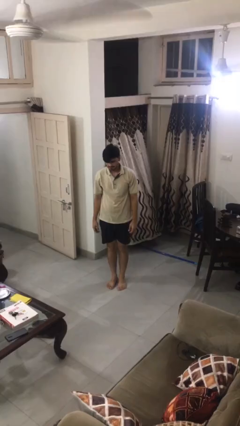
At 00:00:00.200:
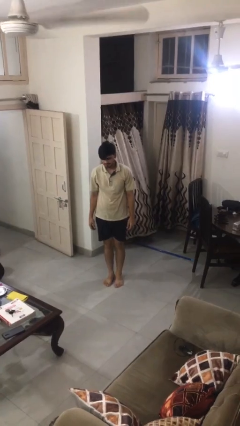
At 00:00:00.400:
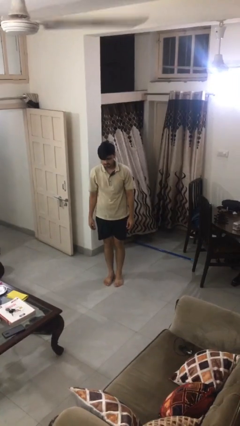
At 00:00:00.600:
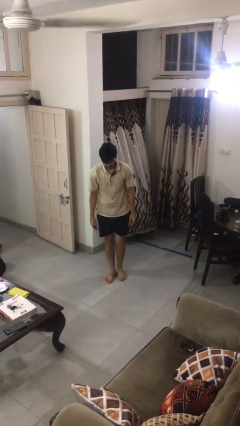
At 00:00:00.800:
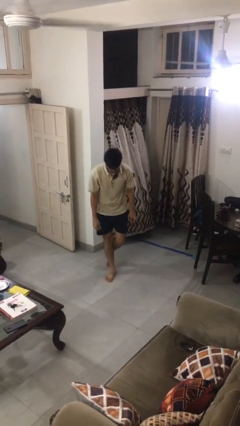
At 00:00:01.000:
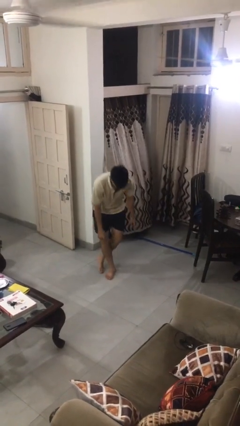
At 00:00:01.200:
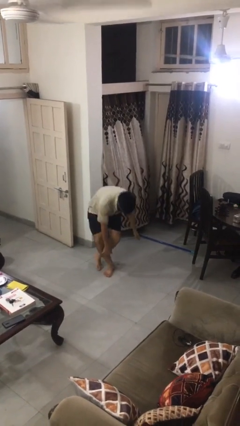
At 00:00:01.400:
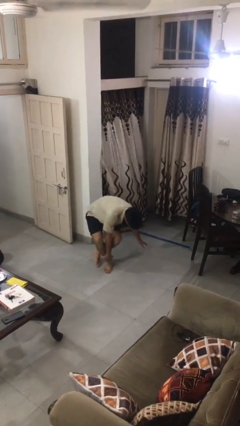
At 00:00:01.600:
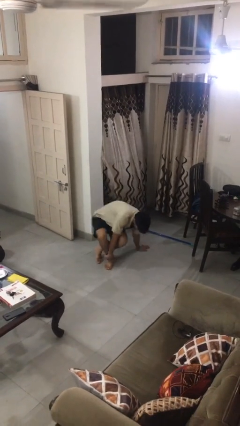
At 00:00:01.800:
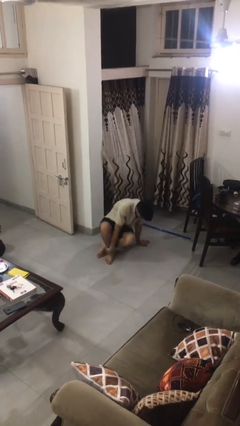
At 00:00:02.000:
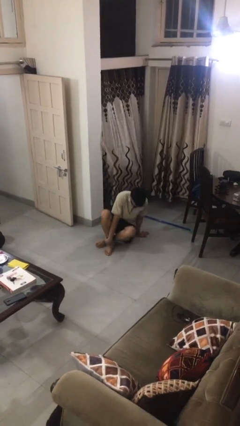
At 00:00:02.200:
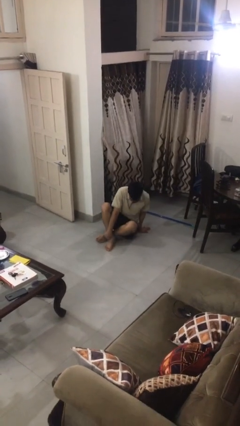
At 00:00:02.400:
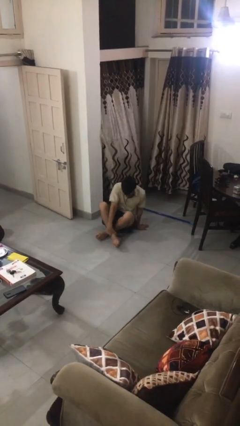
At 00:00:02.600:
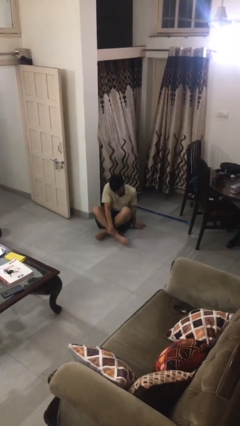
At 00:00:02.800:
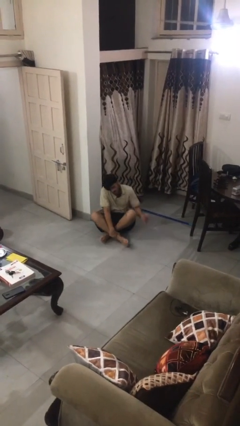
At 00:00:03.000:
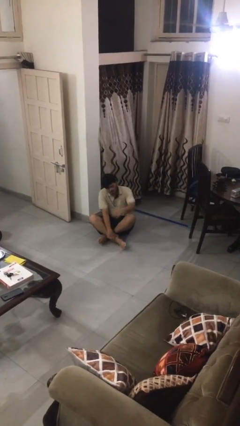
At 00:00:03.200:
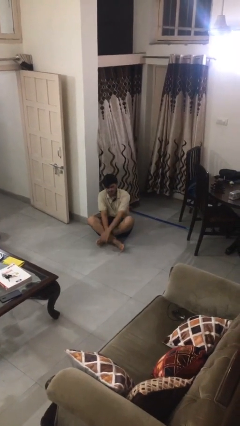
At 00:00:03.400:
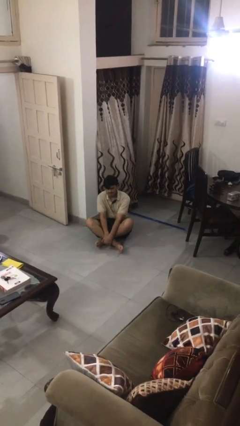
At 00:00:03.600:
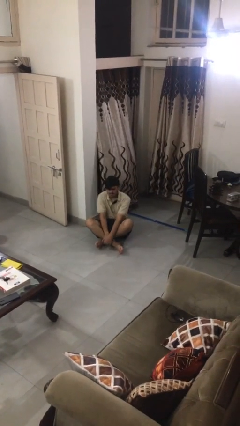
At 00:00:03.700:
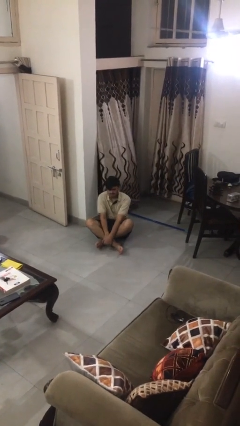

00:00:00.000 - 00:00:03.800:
person sits crisscross

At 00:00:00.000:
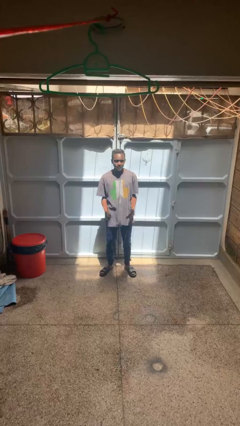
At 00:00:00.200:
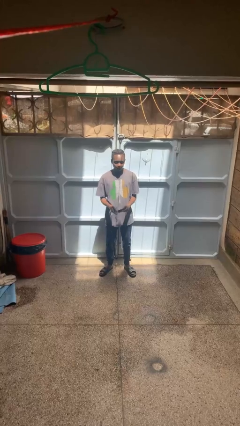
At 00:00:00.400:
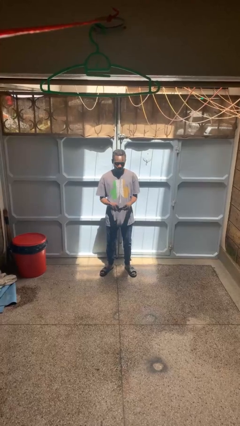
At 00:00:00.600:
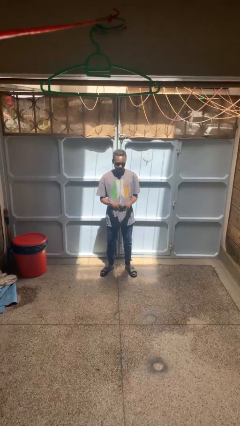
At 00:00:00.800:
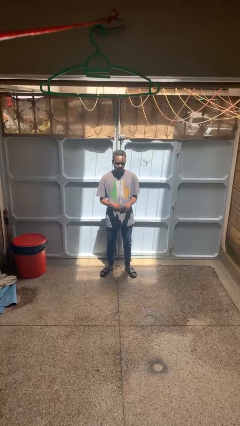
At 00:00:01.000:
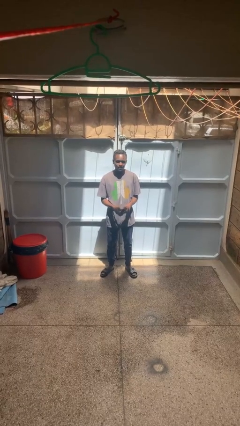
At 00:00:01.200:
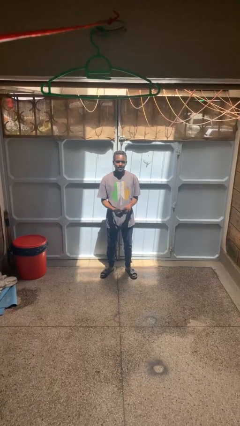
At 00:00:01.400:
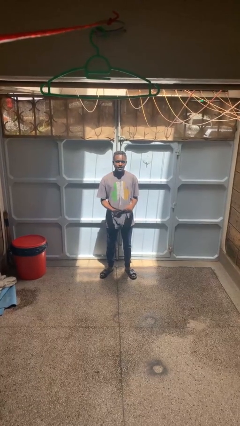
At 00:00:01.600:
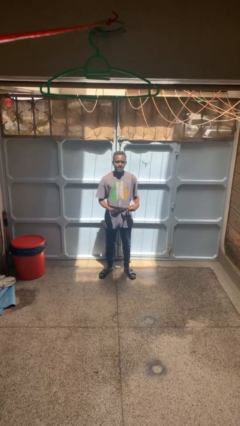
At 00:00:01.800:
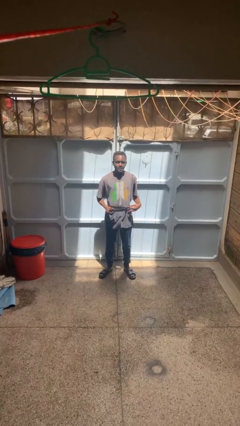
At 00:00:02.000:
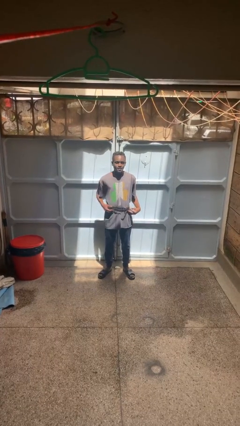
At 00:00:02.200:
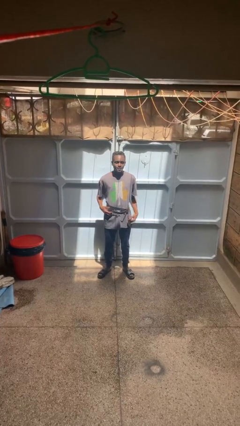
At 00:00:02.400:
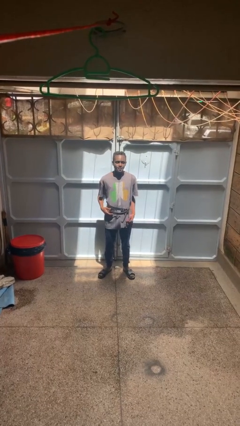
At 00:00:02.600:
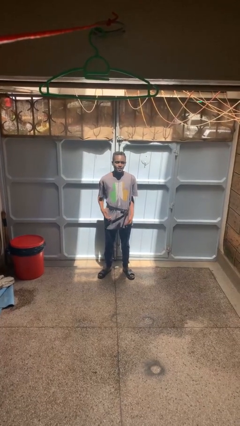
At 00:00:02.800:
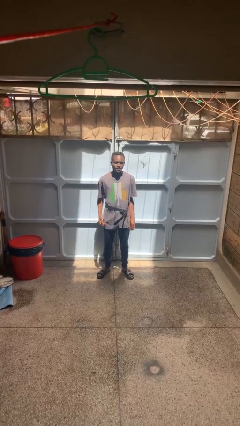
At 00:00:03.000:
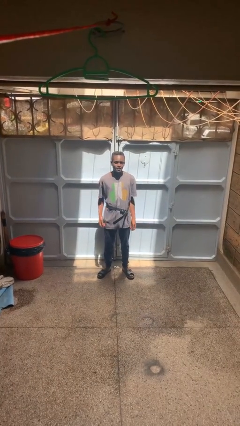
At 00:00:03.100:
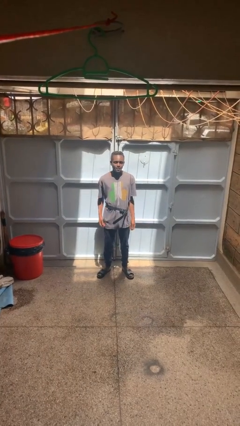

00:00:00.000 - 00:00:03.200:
person puts on belt

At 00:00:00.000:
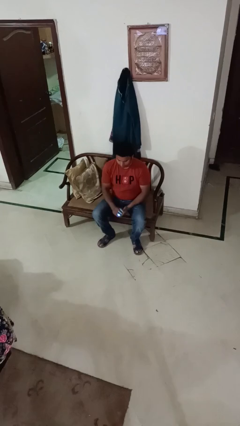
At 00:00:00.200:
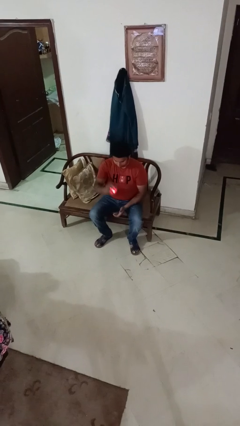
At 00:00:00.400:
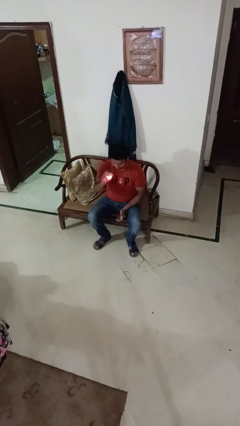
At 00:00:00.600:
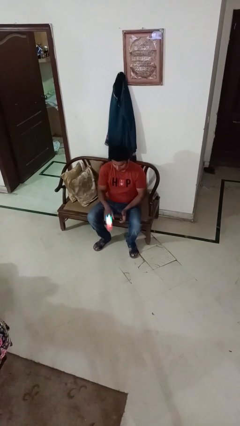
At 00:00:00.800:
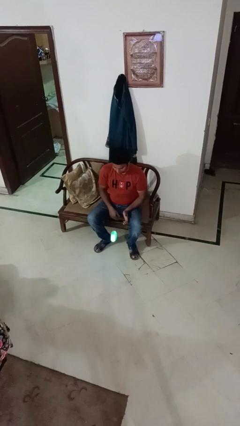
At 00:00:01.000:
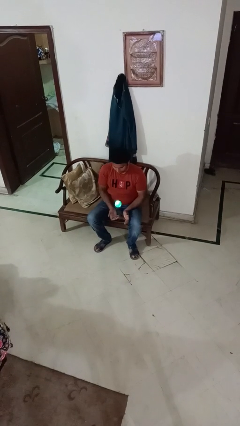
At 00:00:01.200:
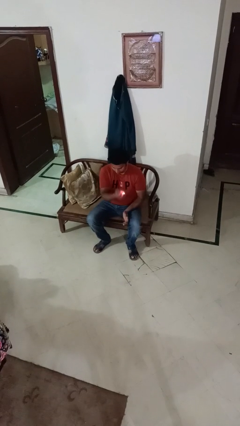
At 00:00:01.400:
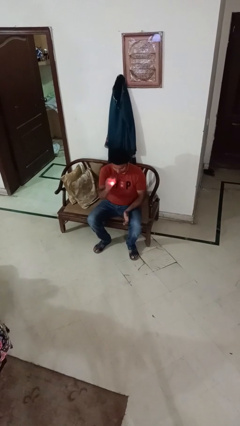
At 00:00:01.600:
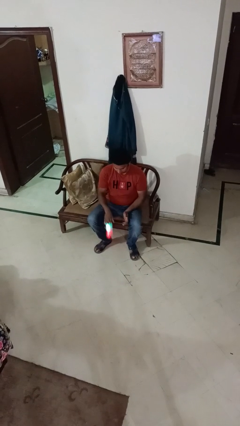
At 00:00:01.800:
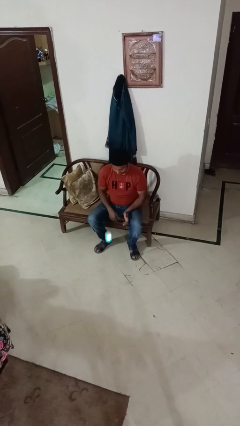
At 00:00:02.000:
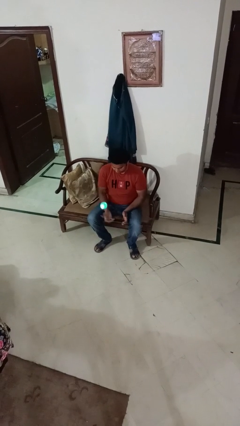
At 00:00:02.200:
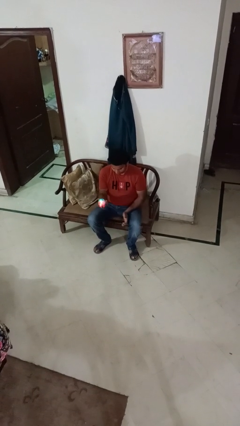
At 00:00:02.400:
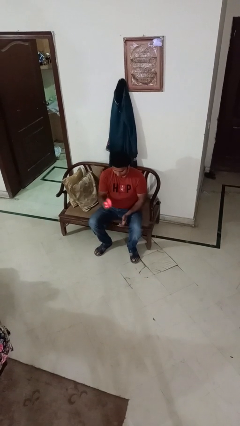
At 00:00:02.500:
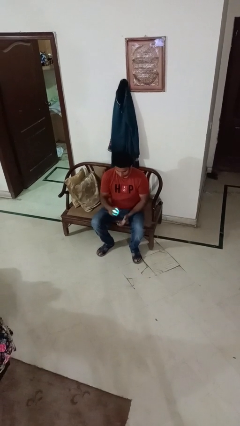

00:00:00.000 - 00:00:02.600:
person bounces ball on floor

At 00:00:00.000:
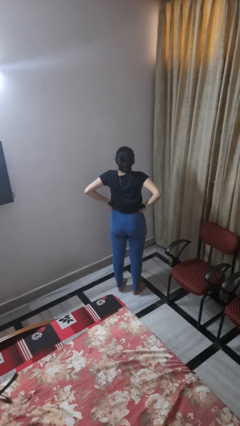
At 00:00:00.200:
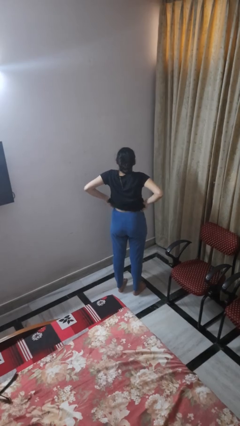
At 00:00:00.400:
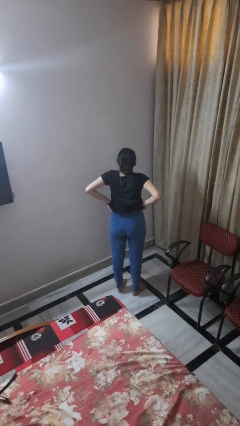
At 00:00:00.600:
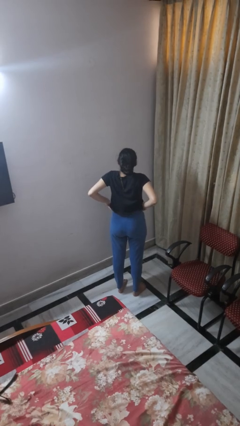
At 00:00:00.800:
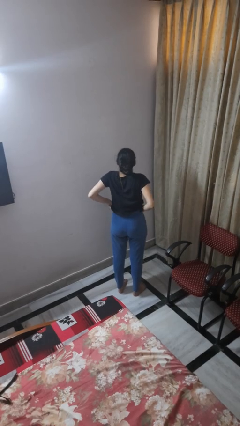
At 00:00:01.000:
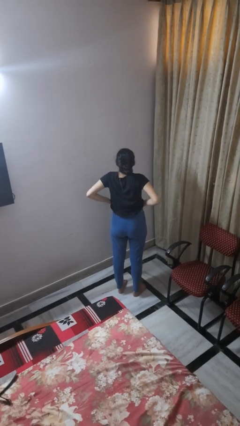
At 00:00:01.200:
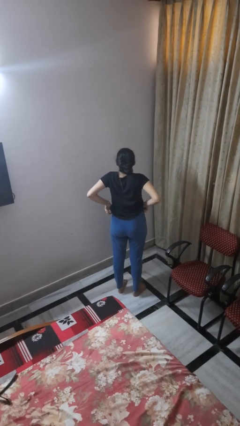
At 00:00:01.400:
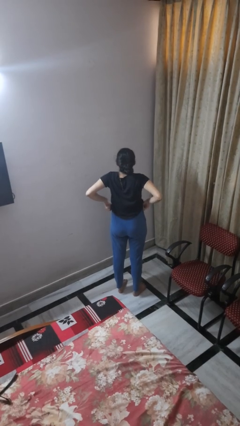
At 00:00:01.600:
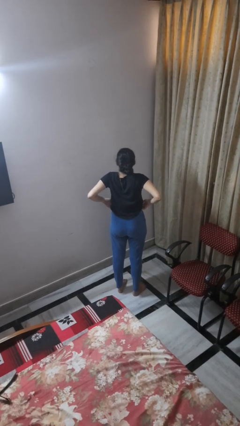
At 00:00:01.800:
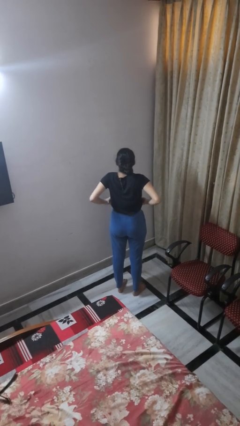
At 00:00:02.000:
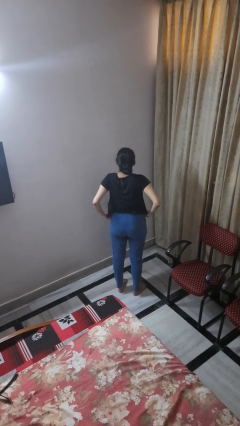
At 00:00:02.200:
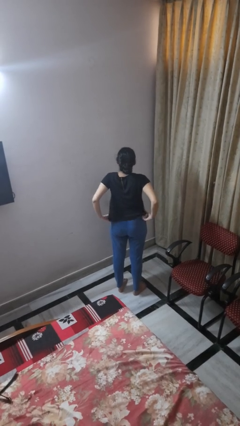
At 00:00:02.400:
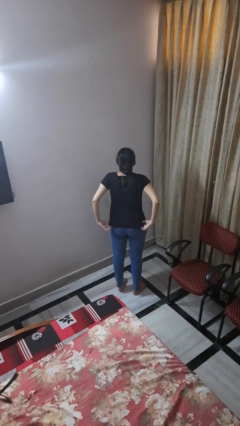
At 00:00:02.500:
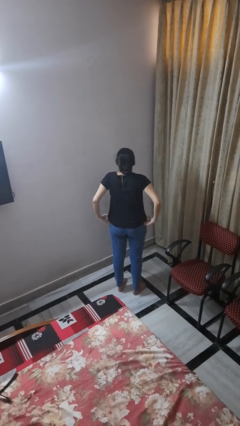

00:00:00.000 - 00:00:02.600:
person hikes up pants

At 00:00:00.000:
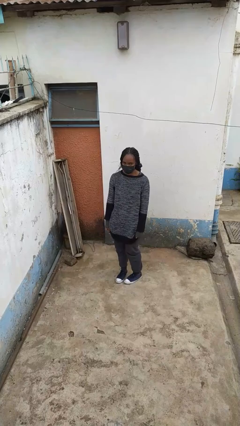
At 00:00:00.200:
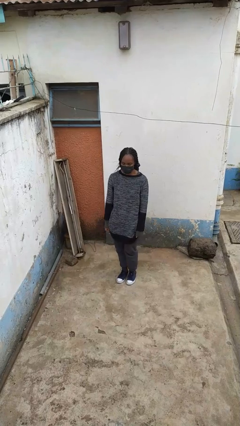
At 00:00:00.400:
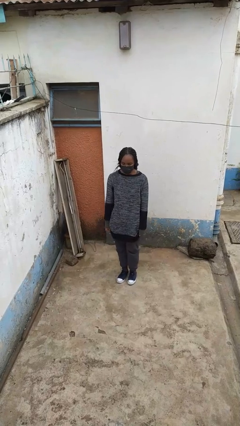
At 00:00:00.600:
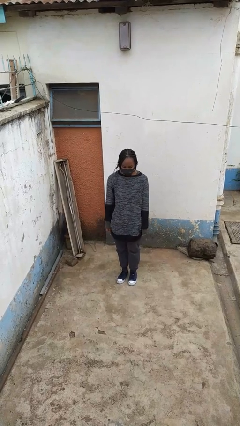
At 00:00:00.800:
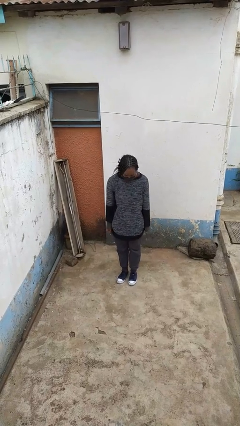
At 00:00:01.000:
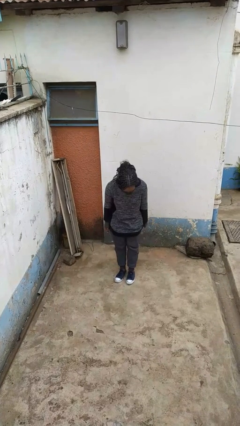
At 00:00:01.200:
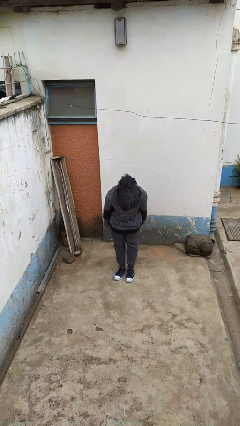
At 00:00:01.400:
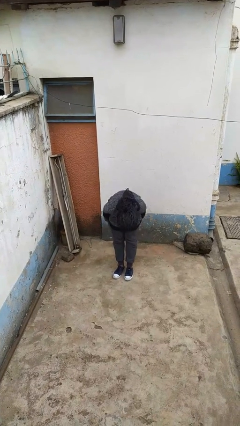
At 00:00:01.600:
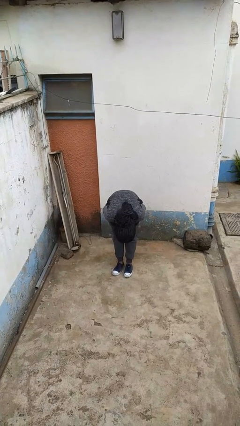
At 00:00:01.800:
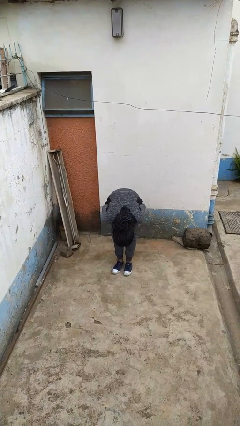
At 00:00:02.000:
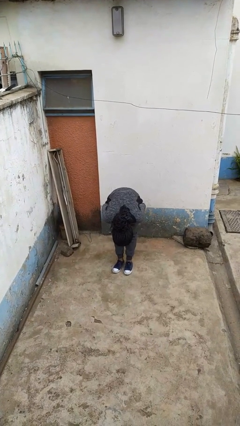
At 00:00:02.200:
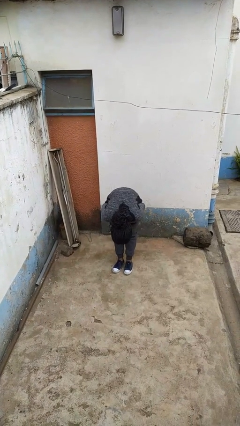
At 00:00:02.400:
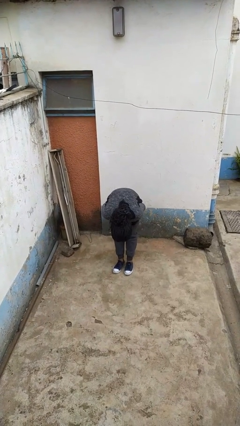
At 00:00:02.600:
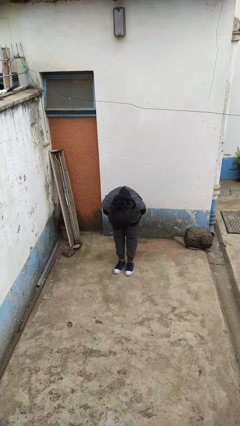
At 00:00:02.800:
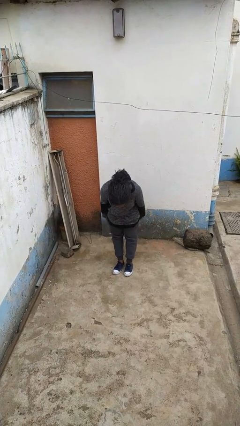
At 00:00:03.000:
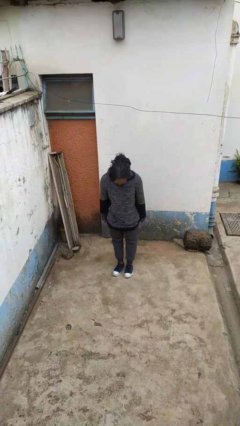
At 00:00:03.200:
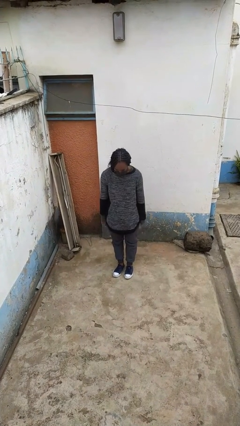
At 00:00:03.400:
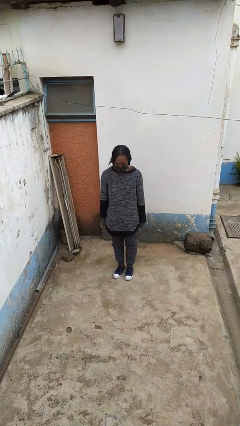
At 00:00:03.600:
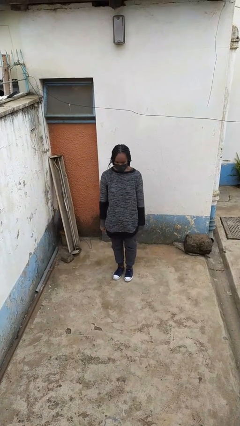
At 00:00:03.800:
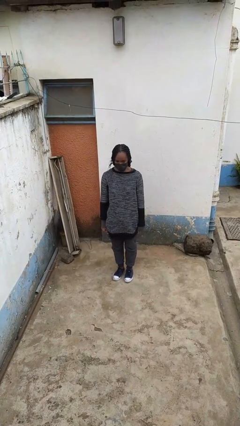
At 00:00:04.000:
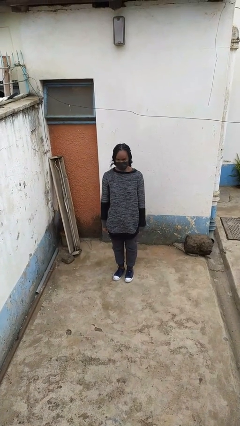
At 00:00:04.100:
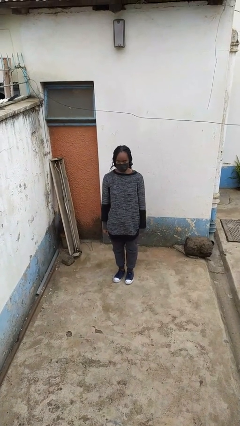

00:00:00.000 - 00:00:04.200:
person bows

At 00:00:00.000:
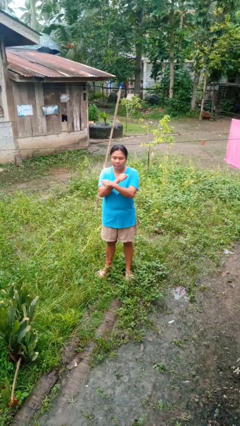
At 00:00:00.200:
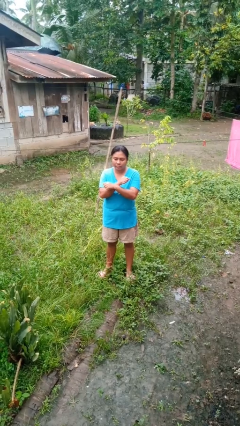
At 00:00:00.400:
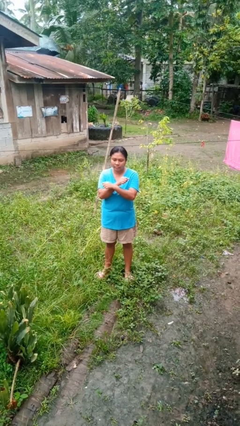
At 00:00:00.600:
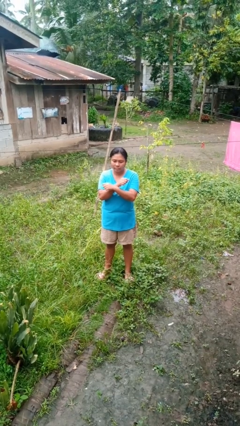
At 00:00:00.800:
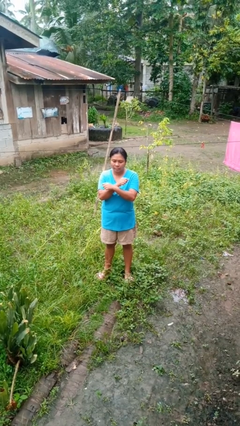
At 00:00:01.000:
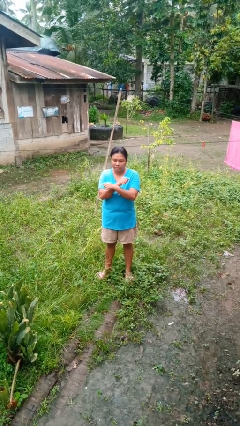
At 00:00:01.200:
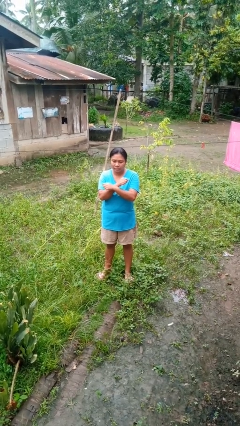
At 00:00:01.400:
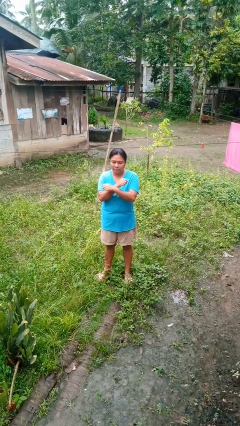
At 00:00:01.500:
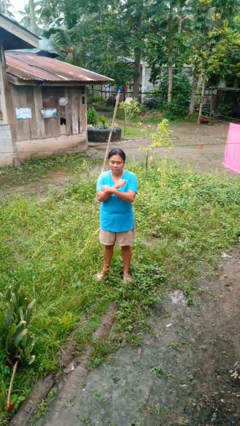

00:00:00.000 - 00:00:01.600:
person gestures arms x
